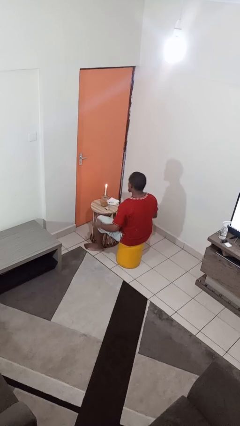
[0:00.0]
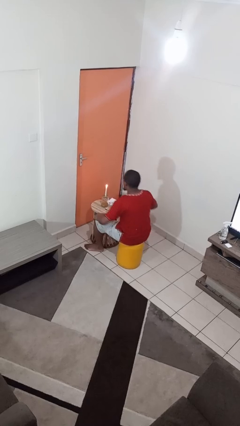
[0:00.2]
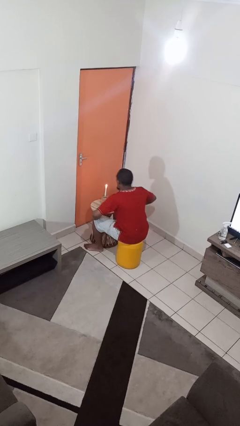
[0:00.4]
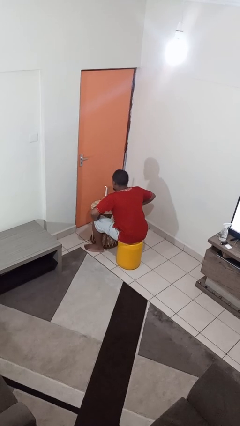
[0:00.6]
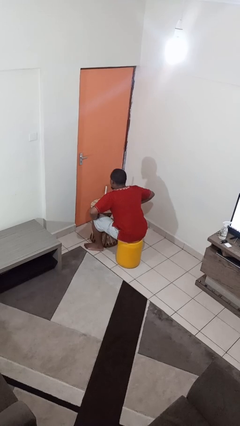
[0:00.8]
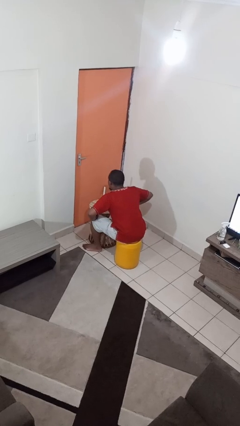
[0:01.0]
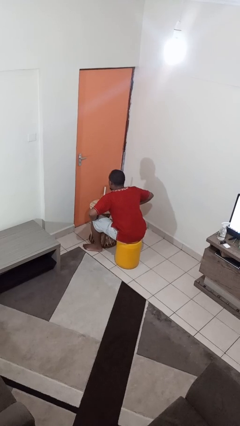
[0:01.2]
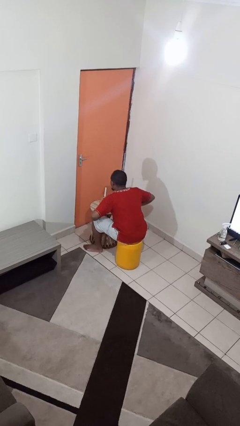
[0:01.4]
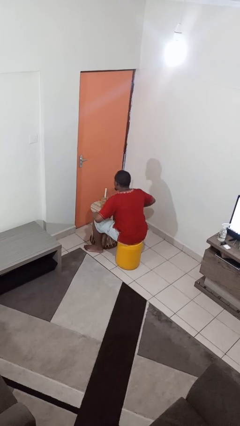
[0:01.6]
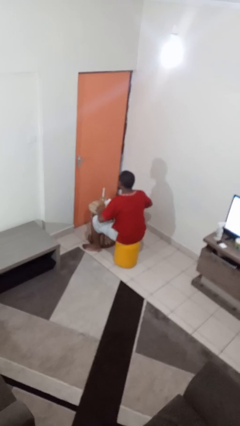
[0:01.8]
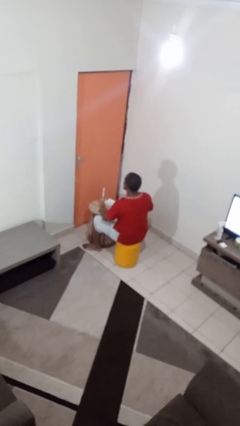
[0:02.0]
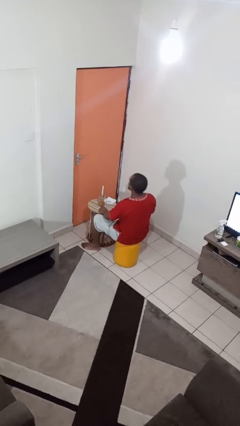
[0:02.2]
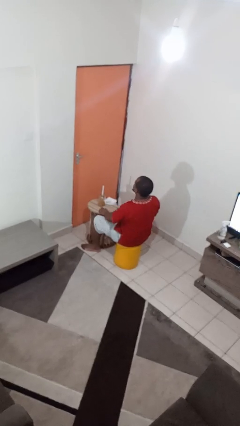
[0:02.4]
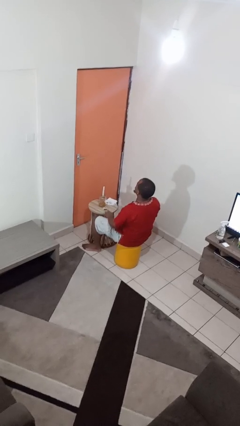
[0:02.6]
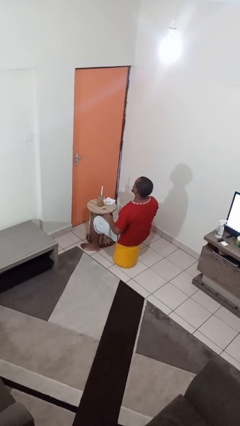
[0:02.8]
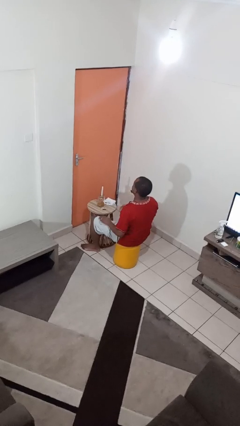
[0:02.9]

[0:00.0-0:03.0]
person extinguishes candle

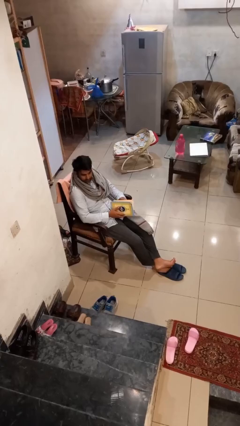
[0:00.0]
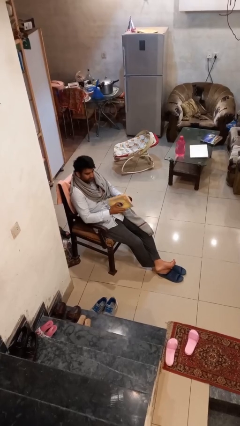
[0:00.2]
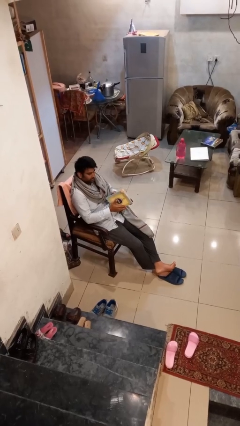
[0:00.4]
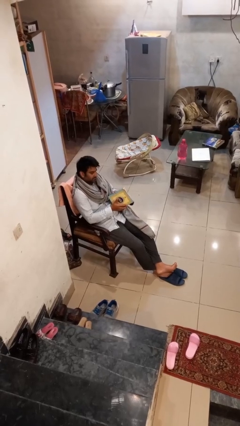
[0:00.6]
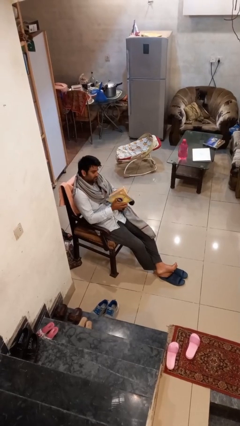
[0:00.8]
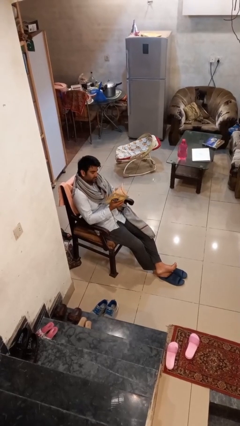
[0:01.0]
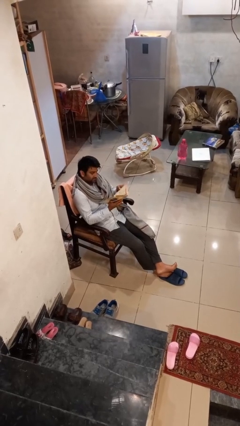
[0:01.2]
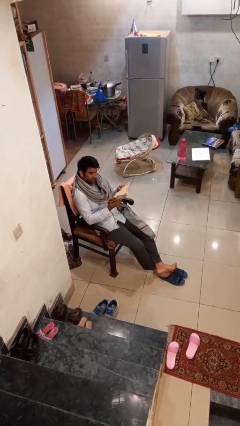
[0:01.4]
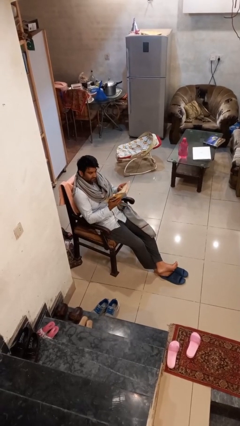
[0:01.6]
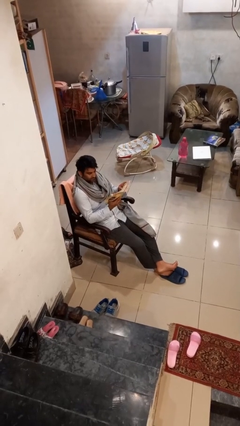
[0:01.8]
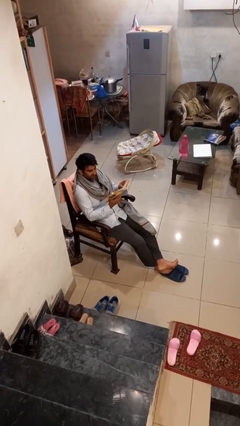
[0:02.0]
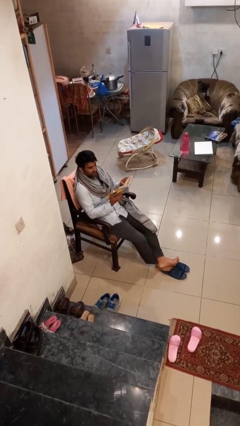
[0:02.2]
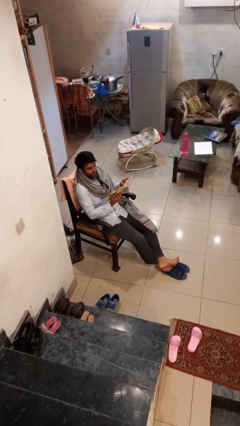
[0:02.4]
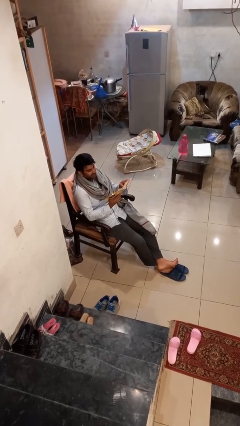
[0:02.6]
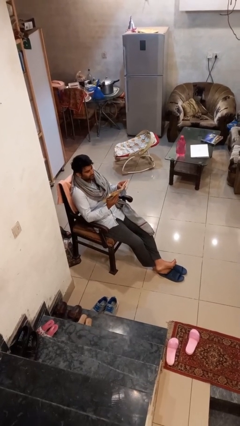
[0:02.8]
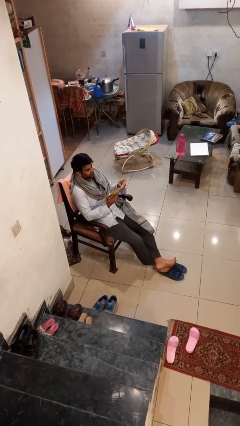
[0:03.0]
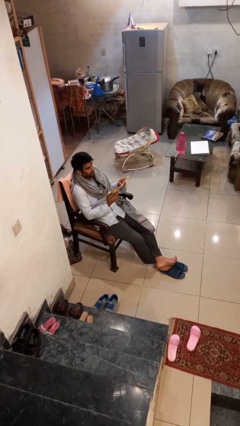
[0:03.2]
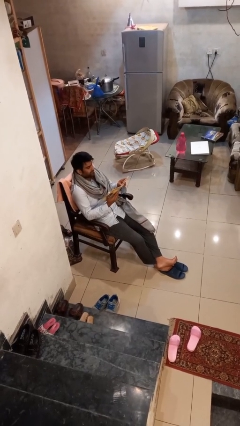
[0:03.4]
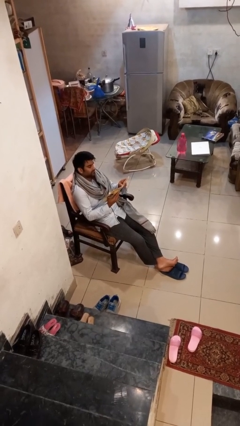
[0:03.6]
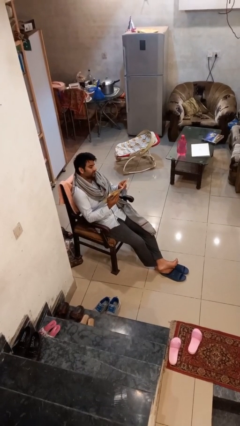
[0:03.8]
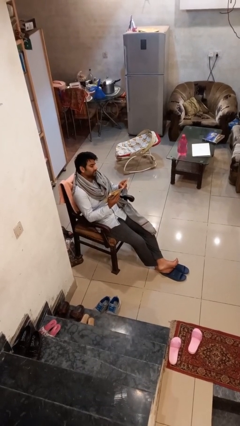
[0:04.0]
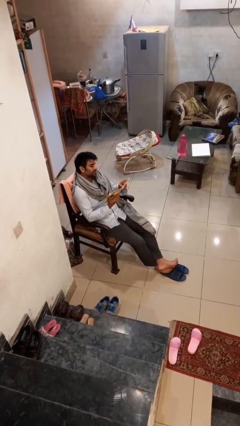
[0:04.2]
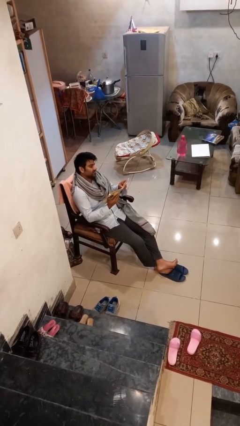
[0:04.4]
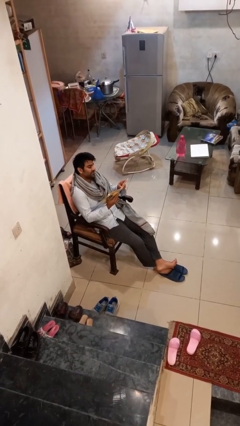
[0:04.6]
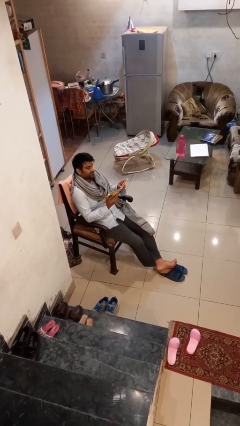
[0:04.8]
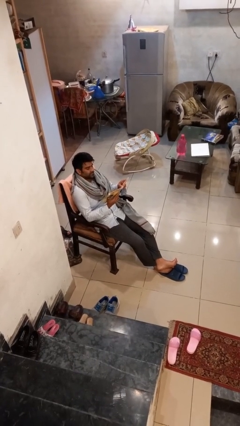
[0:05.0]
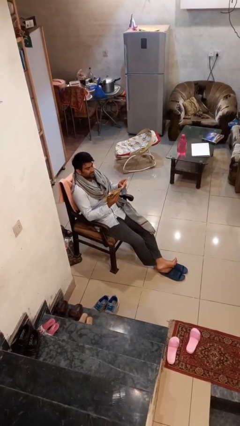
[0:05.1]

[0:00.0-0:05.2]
person reads document

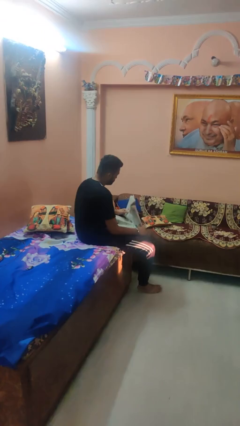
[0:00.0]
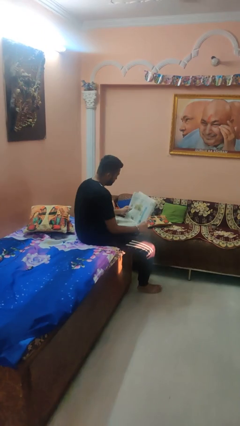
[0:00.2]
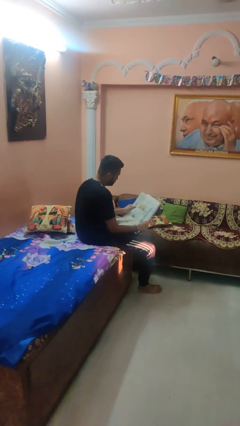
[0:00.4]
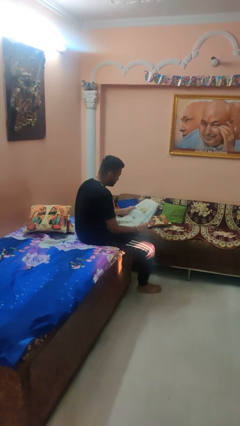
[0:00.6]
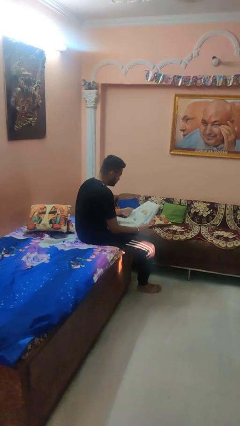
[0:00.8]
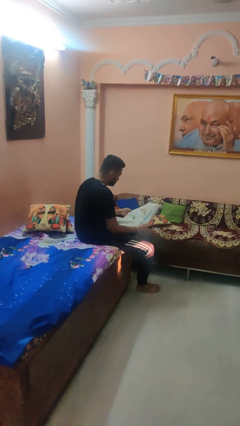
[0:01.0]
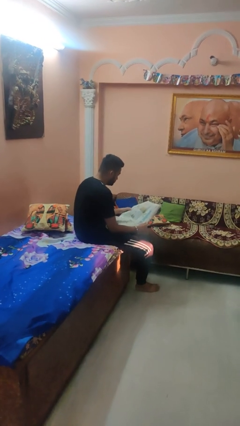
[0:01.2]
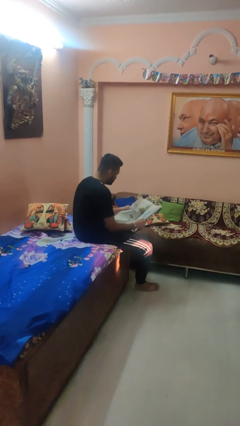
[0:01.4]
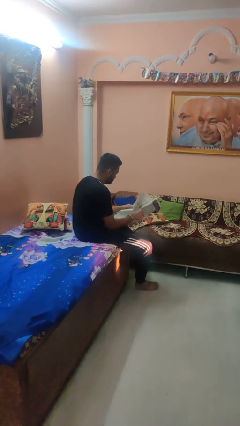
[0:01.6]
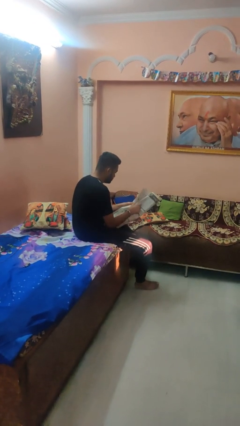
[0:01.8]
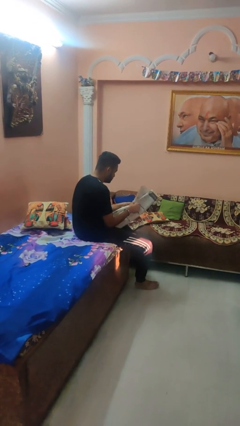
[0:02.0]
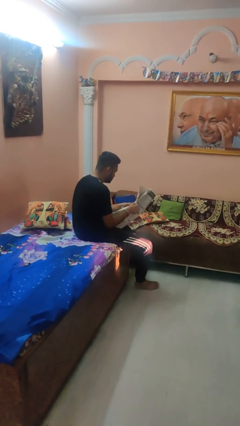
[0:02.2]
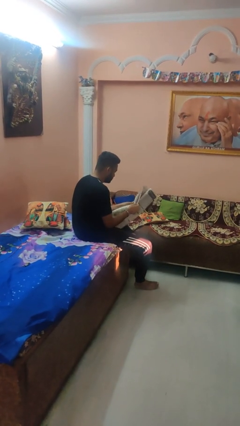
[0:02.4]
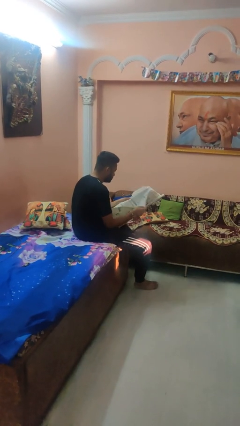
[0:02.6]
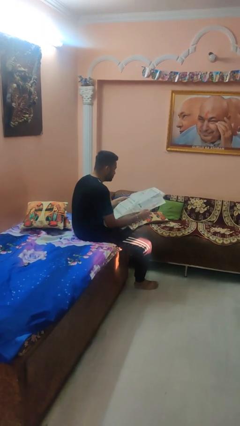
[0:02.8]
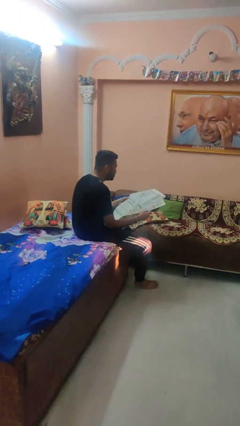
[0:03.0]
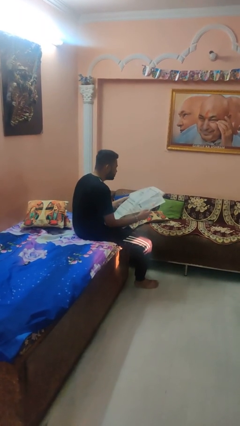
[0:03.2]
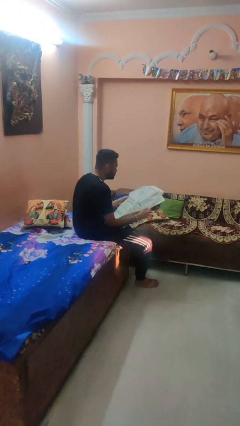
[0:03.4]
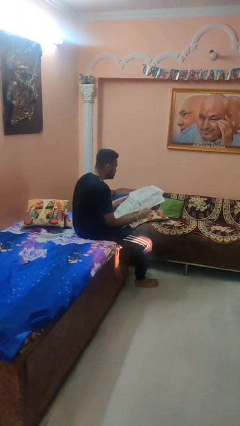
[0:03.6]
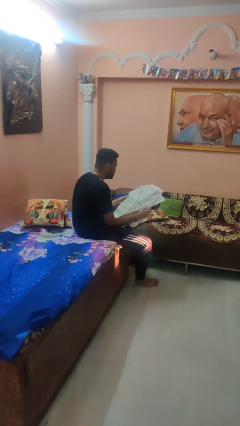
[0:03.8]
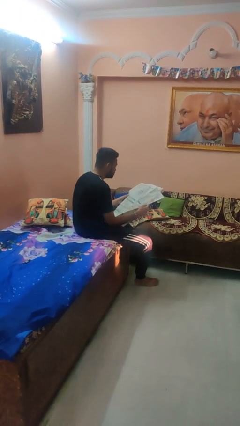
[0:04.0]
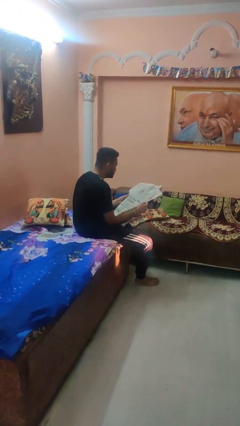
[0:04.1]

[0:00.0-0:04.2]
person reads newspaper

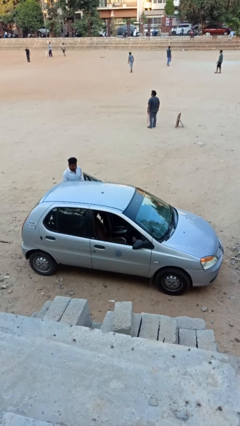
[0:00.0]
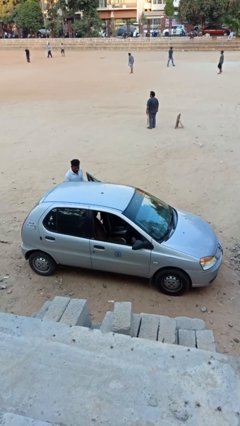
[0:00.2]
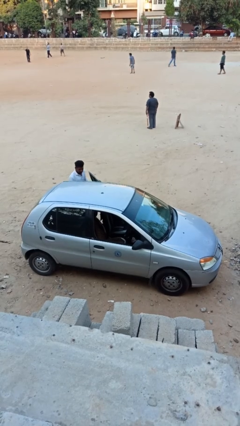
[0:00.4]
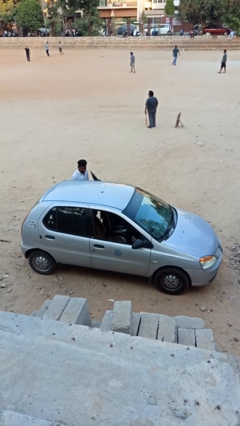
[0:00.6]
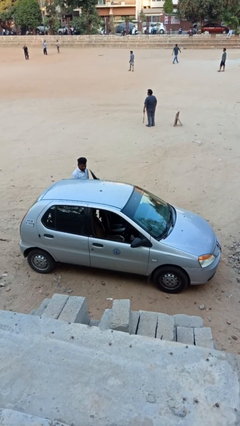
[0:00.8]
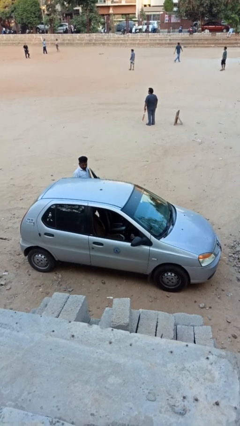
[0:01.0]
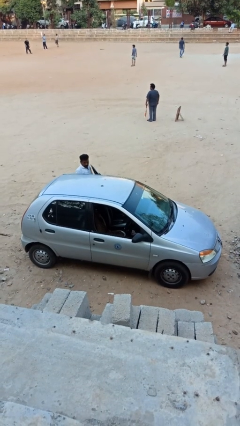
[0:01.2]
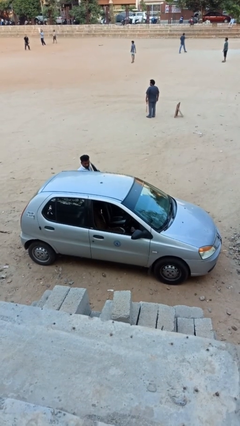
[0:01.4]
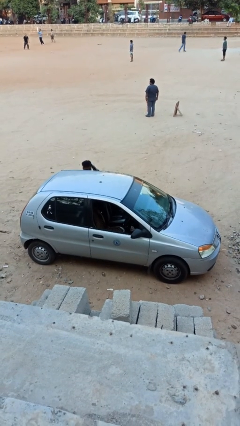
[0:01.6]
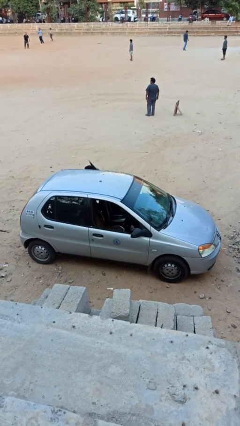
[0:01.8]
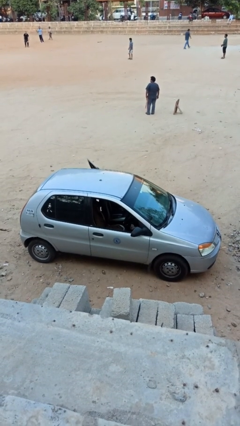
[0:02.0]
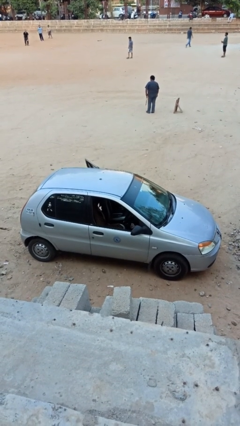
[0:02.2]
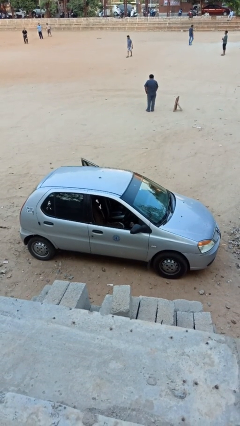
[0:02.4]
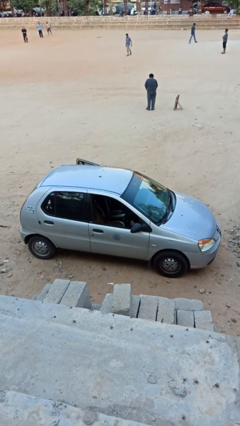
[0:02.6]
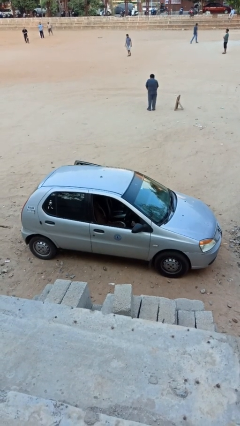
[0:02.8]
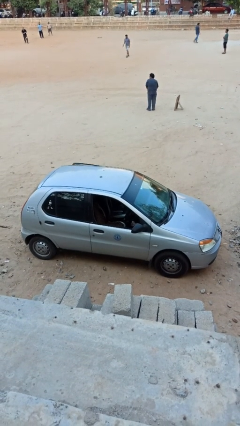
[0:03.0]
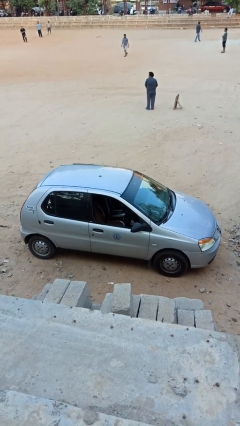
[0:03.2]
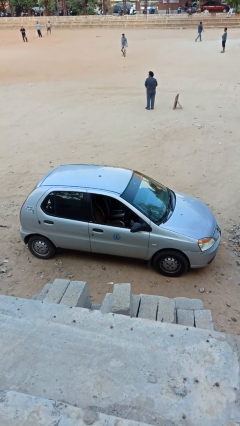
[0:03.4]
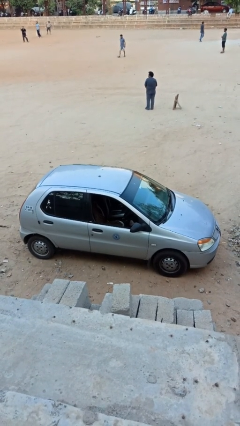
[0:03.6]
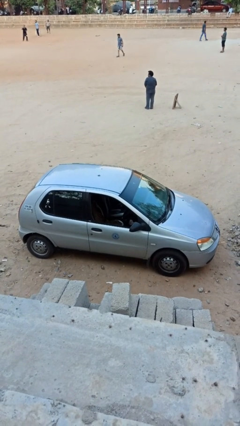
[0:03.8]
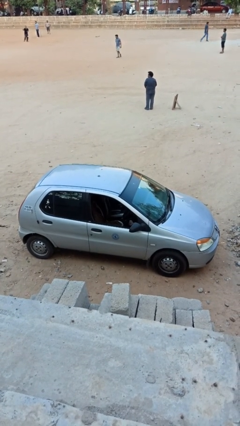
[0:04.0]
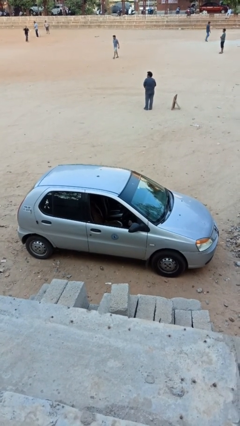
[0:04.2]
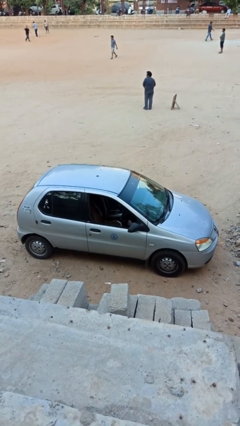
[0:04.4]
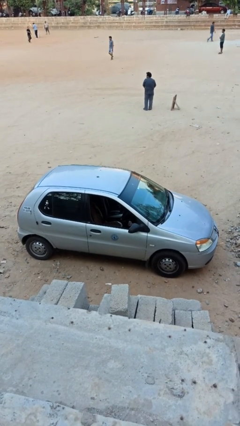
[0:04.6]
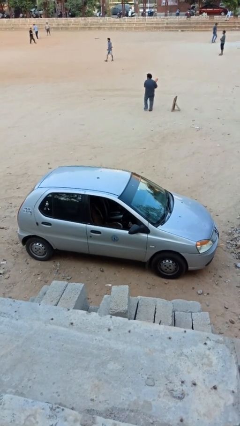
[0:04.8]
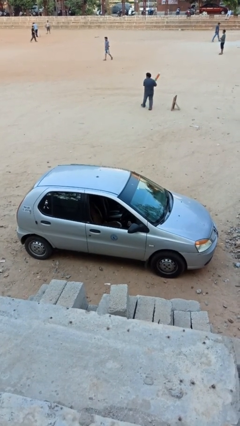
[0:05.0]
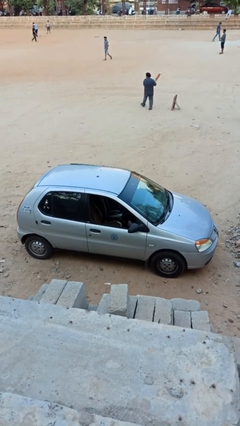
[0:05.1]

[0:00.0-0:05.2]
car picks up person

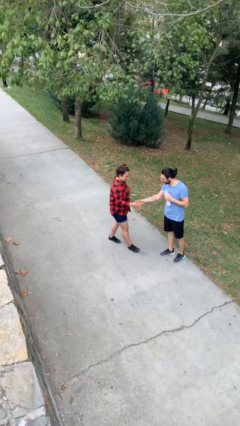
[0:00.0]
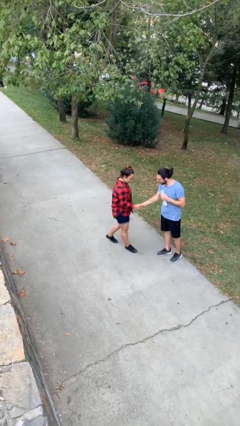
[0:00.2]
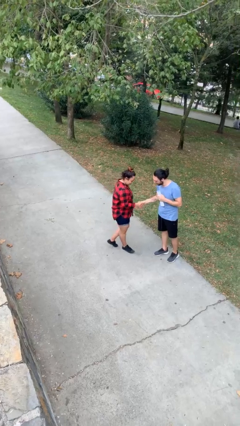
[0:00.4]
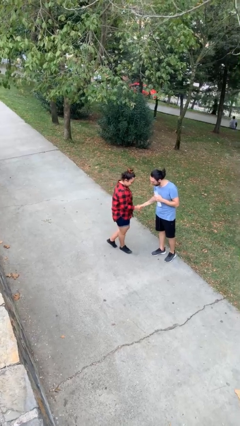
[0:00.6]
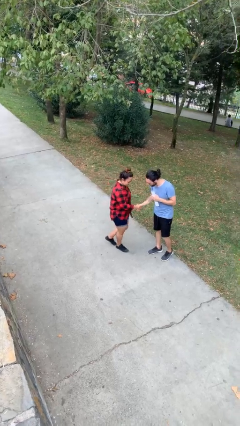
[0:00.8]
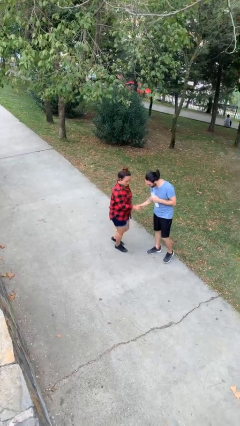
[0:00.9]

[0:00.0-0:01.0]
person shakes hand
